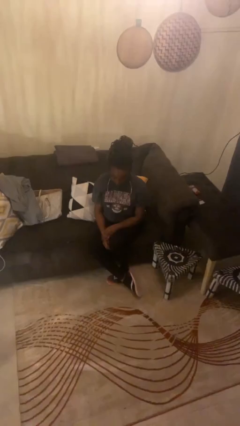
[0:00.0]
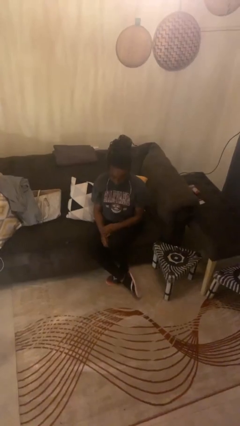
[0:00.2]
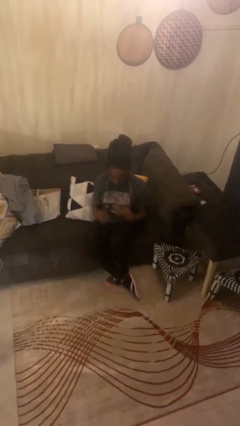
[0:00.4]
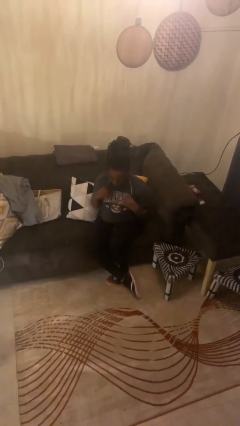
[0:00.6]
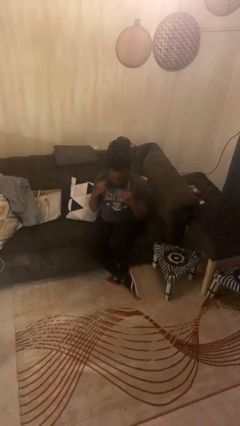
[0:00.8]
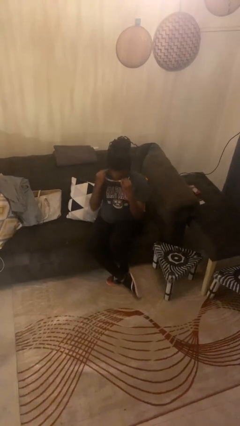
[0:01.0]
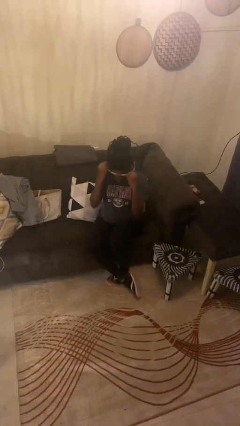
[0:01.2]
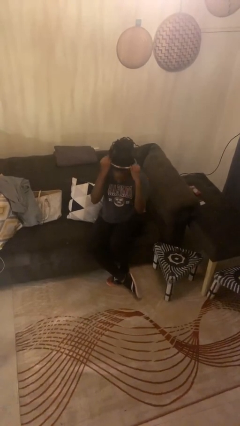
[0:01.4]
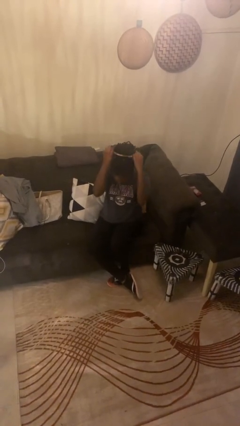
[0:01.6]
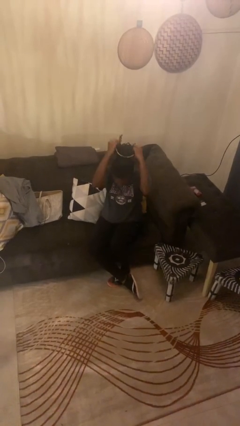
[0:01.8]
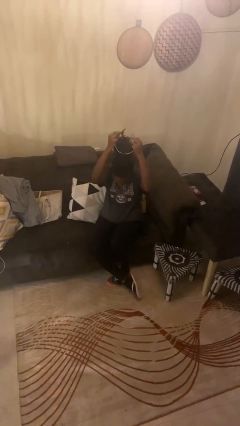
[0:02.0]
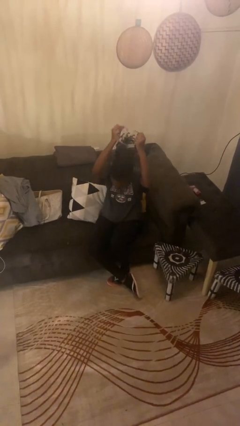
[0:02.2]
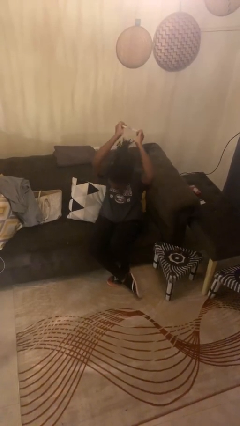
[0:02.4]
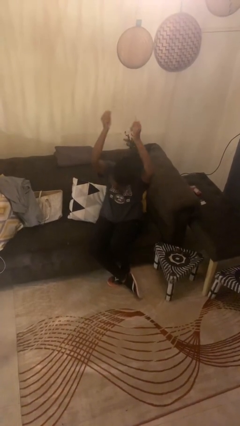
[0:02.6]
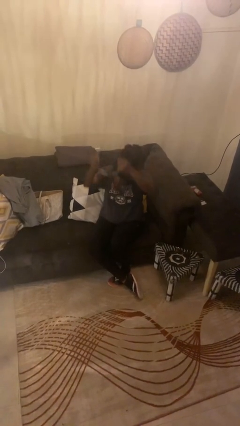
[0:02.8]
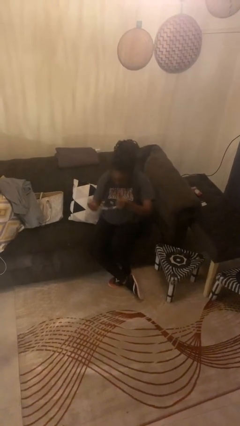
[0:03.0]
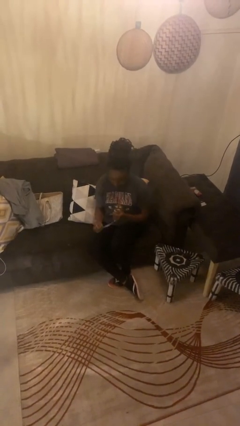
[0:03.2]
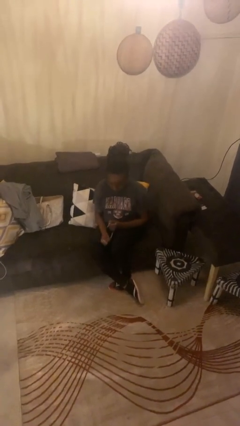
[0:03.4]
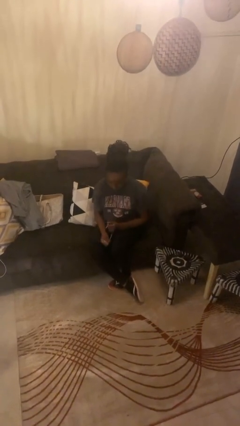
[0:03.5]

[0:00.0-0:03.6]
person takes off necklace

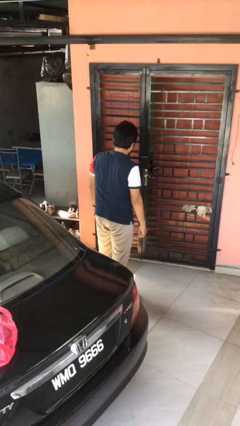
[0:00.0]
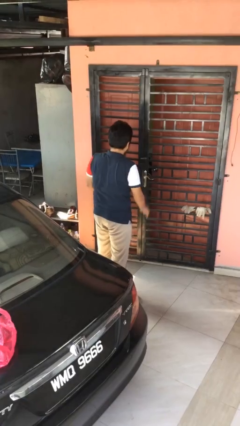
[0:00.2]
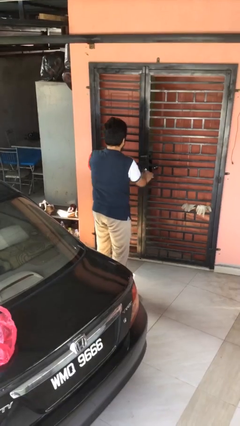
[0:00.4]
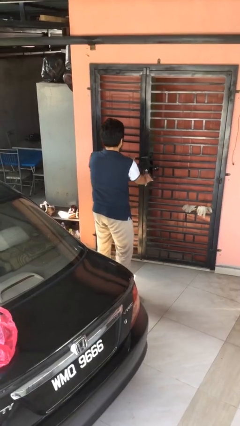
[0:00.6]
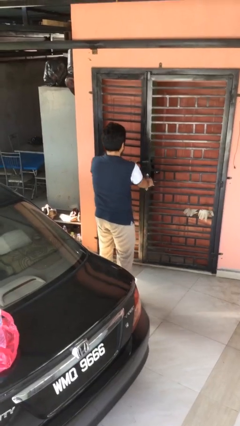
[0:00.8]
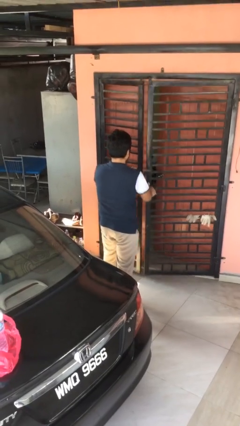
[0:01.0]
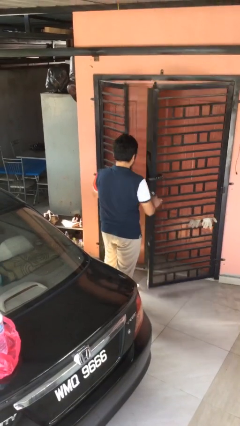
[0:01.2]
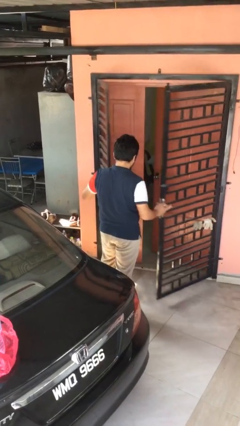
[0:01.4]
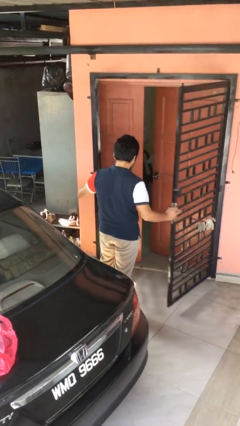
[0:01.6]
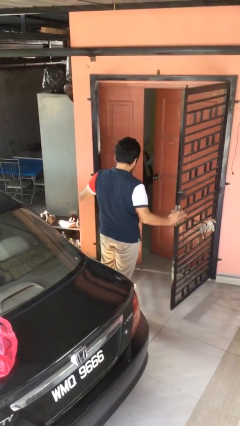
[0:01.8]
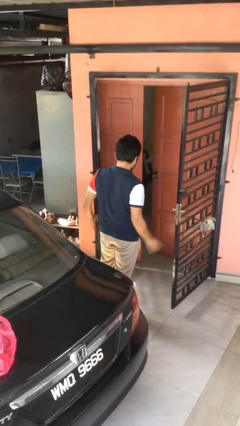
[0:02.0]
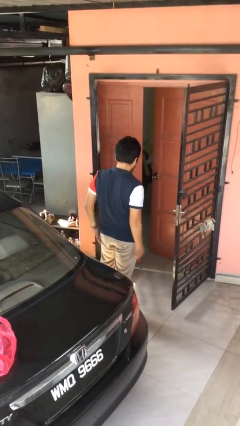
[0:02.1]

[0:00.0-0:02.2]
person opens gate

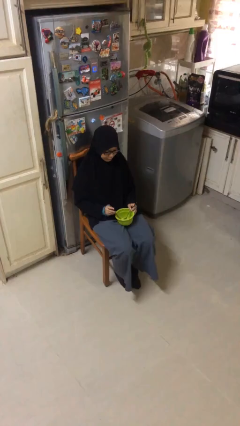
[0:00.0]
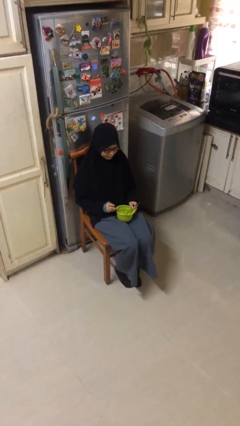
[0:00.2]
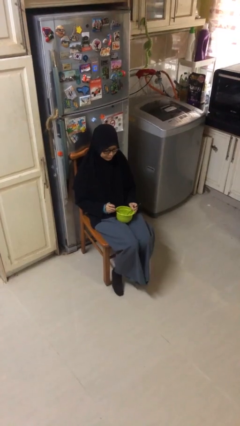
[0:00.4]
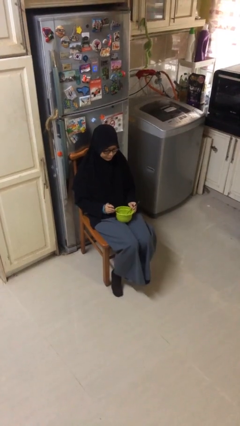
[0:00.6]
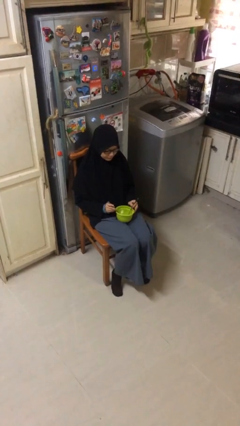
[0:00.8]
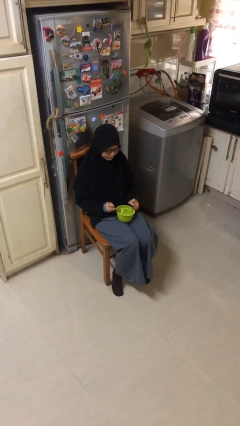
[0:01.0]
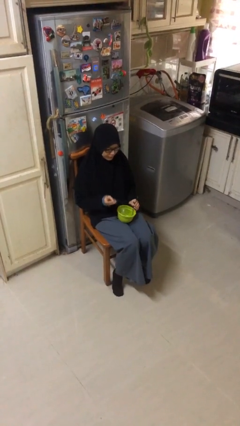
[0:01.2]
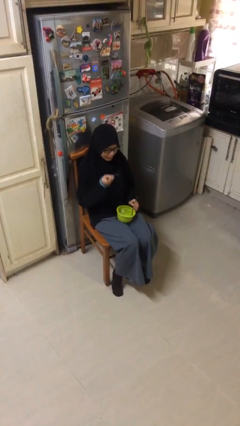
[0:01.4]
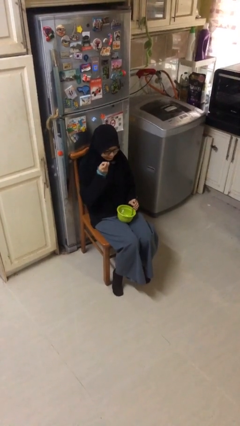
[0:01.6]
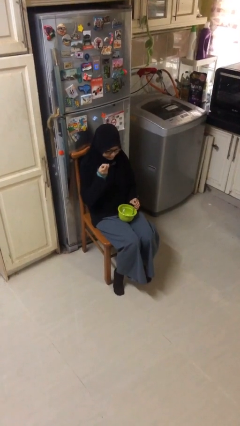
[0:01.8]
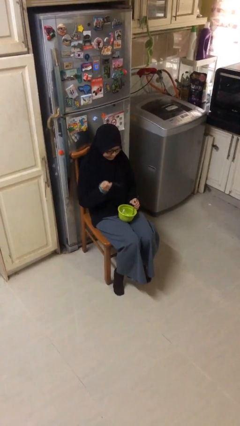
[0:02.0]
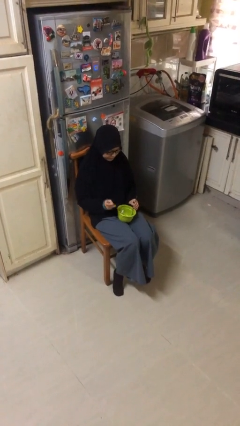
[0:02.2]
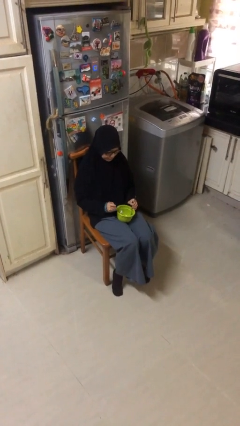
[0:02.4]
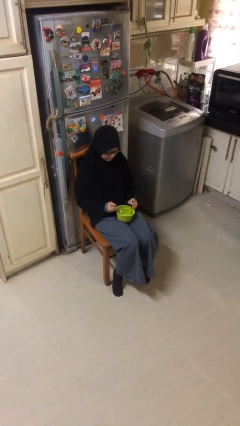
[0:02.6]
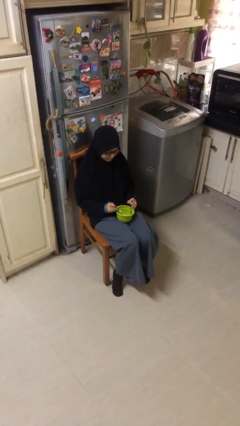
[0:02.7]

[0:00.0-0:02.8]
person eats with utensil

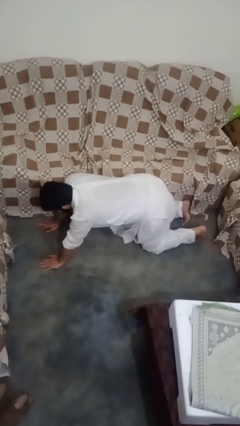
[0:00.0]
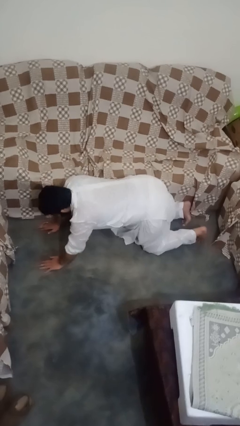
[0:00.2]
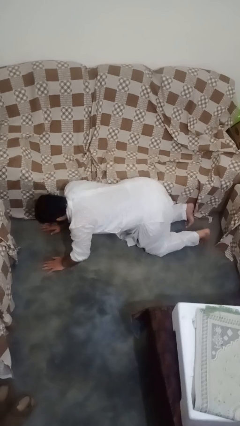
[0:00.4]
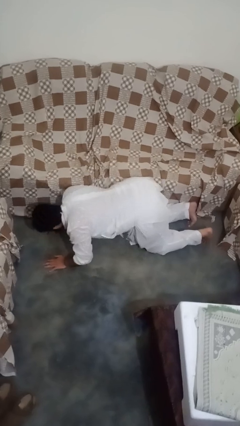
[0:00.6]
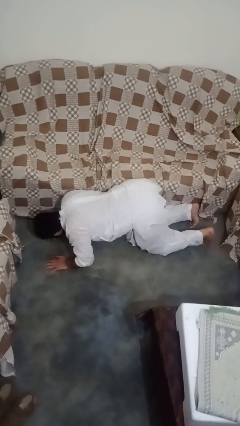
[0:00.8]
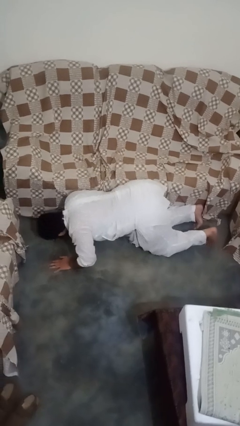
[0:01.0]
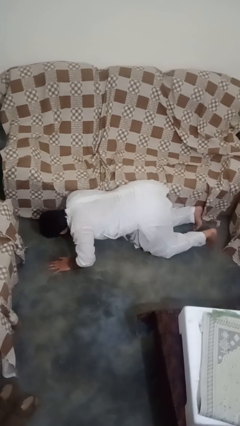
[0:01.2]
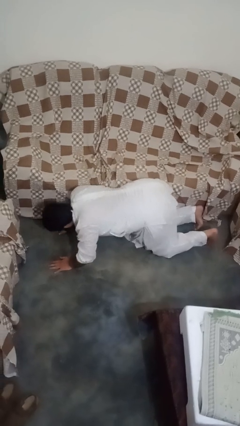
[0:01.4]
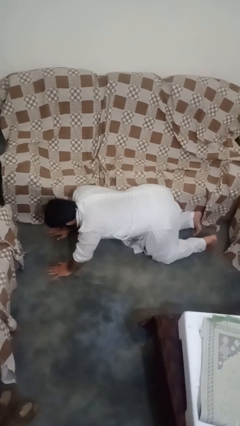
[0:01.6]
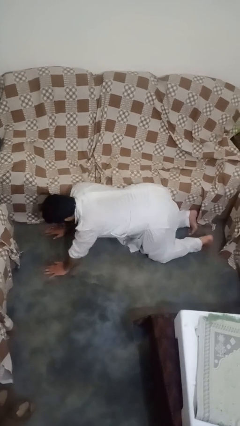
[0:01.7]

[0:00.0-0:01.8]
person exercises with pushup

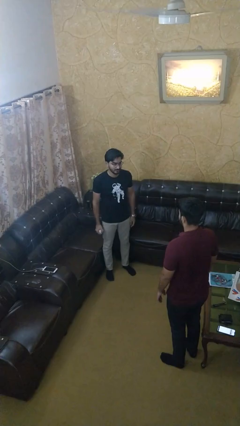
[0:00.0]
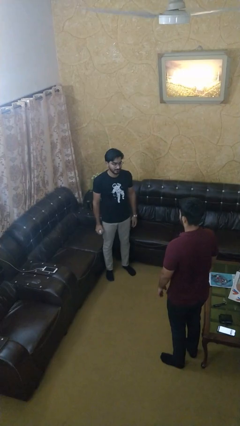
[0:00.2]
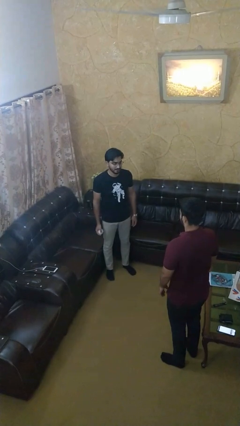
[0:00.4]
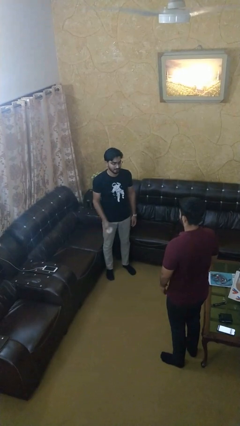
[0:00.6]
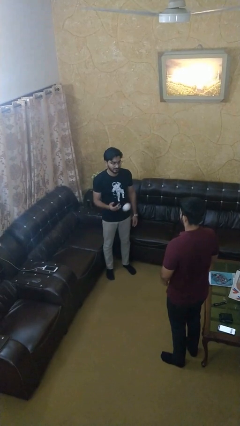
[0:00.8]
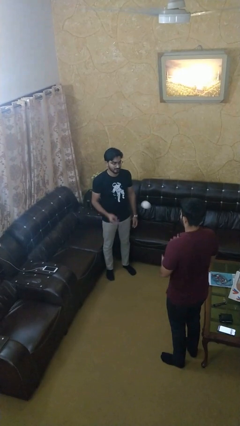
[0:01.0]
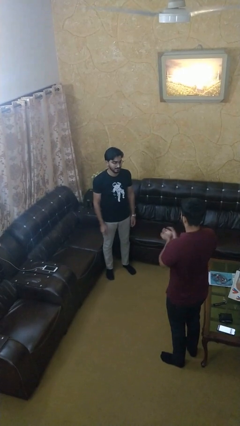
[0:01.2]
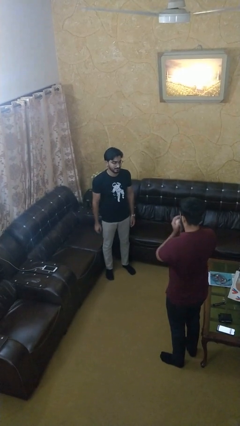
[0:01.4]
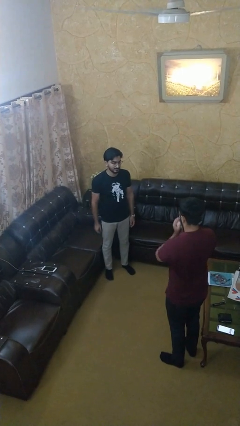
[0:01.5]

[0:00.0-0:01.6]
person throws object to person

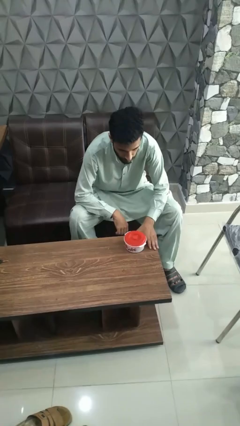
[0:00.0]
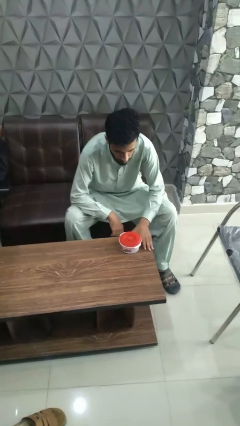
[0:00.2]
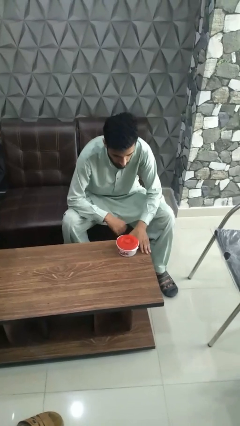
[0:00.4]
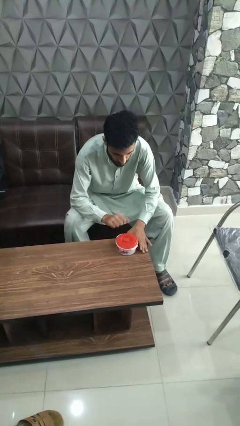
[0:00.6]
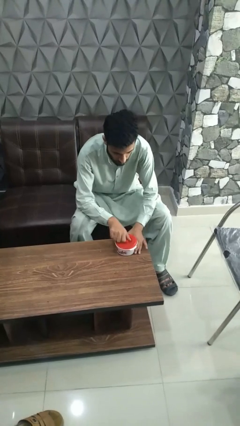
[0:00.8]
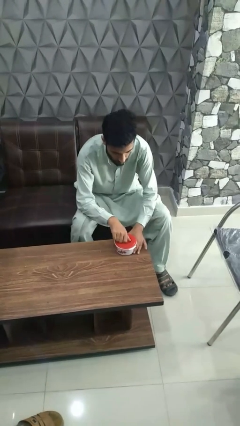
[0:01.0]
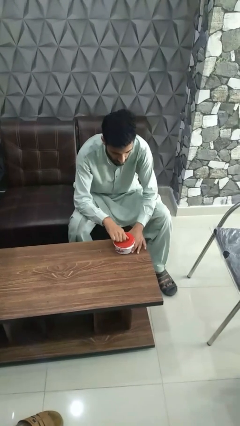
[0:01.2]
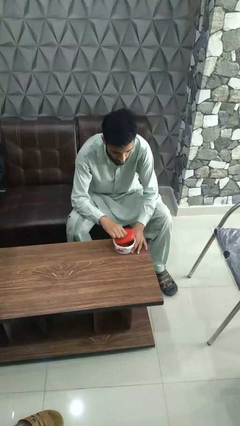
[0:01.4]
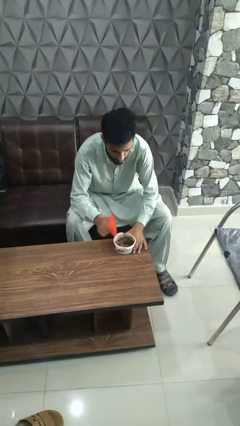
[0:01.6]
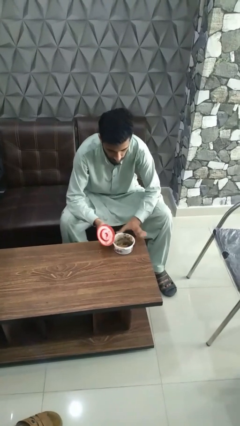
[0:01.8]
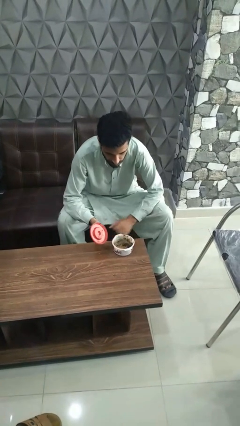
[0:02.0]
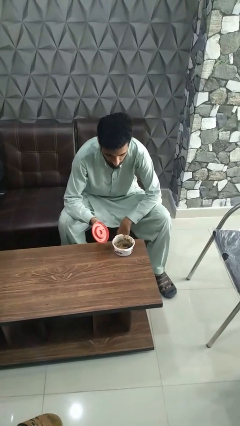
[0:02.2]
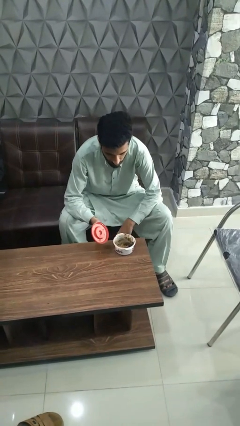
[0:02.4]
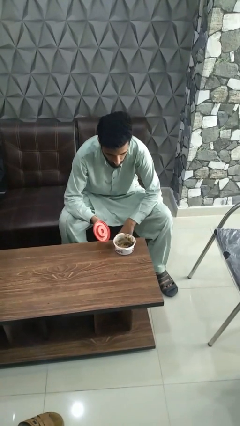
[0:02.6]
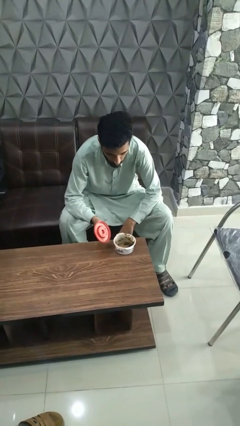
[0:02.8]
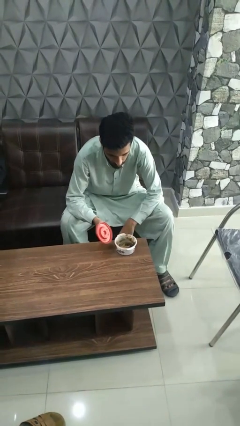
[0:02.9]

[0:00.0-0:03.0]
person opens jar

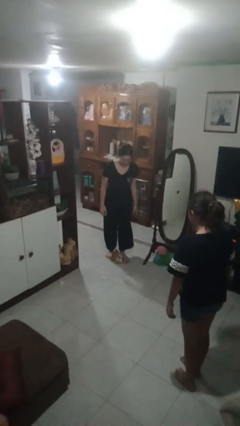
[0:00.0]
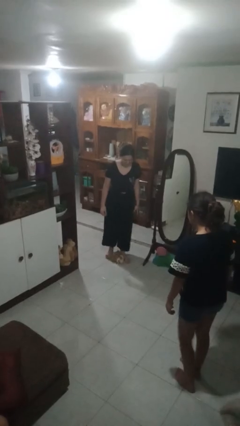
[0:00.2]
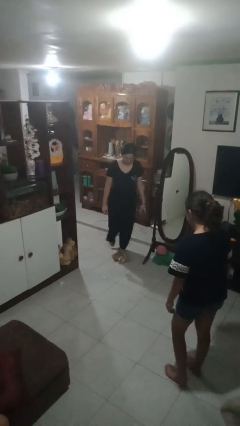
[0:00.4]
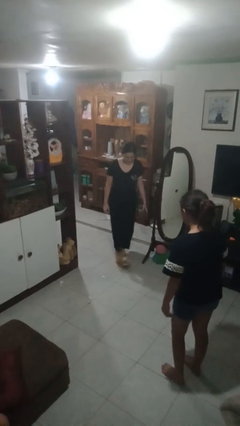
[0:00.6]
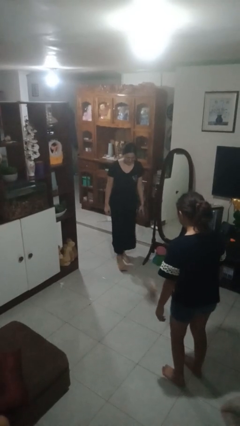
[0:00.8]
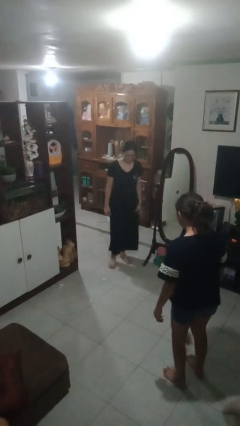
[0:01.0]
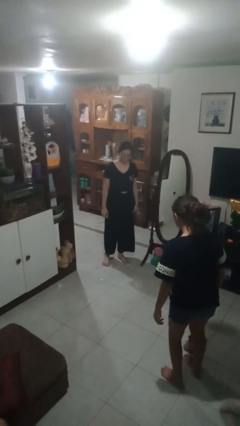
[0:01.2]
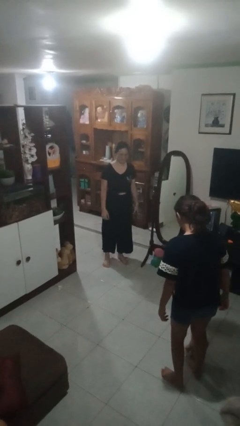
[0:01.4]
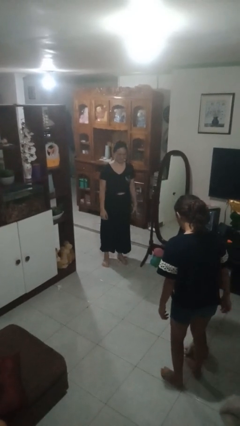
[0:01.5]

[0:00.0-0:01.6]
person kicks object to person

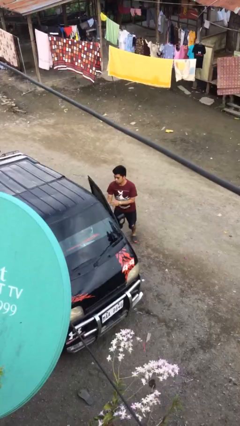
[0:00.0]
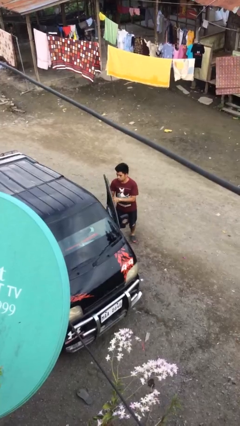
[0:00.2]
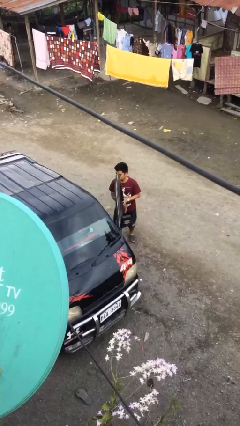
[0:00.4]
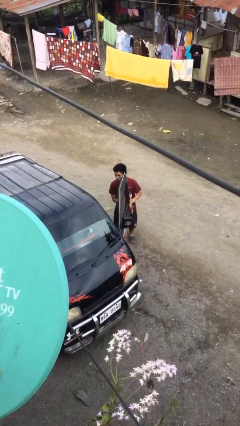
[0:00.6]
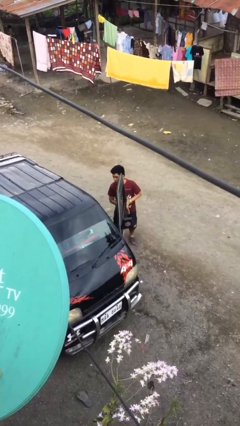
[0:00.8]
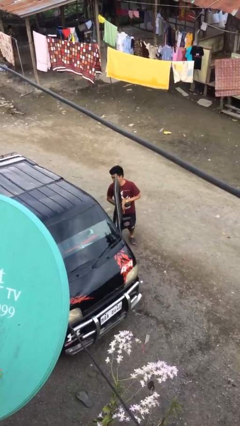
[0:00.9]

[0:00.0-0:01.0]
person opens car door
